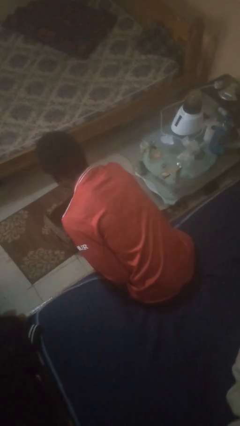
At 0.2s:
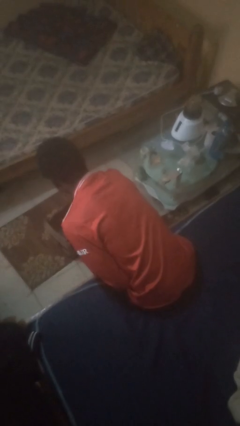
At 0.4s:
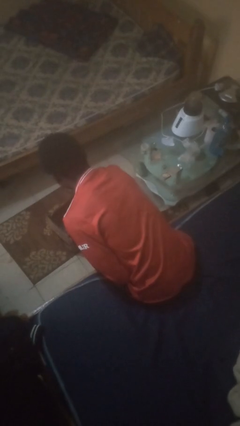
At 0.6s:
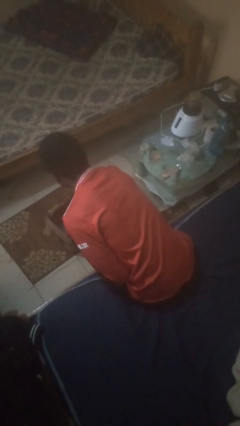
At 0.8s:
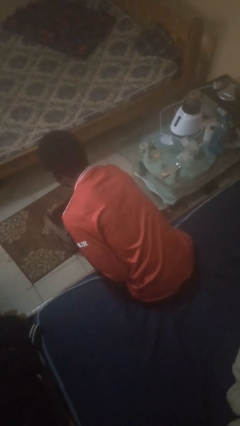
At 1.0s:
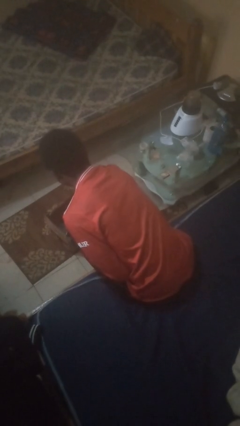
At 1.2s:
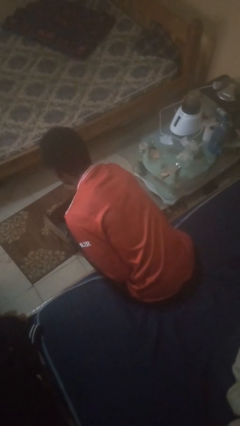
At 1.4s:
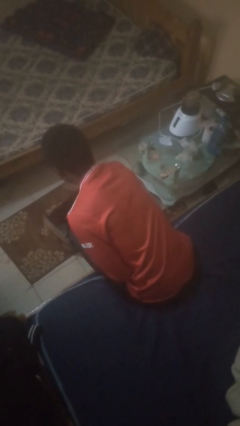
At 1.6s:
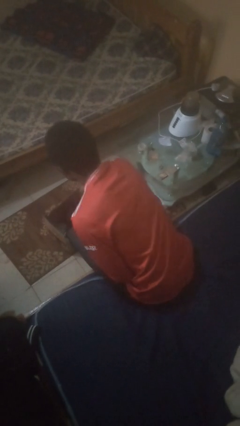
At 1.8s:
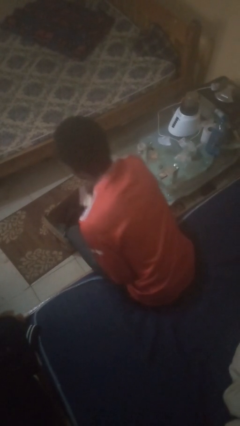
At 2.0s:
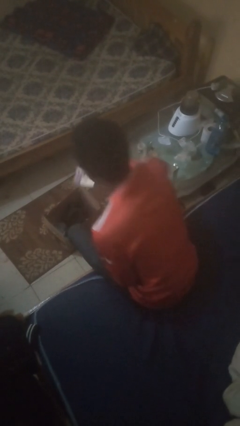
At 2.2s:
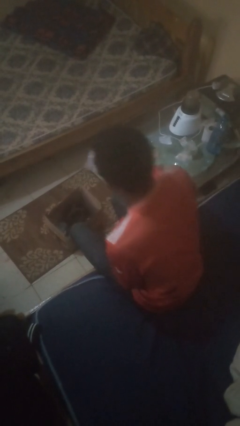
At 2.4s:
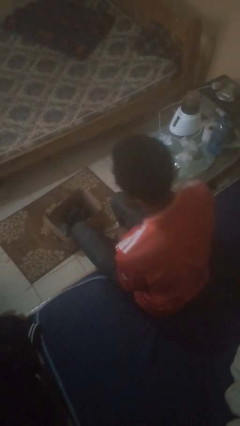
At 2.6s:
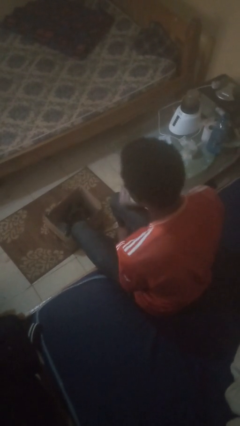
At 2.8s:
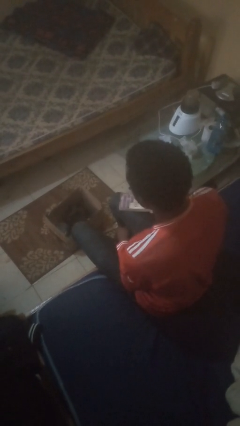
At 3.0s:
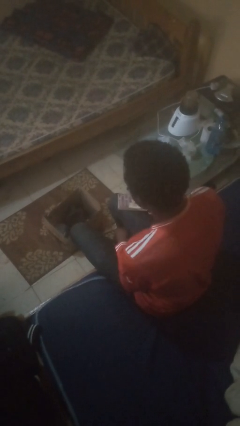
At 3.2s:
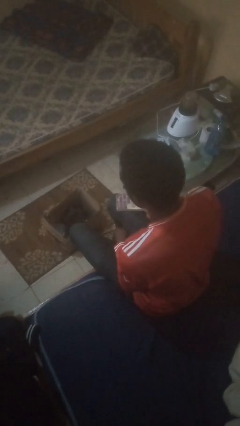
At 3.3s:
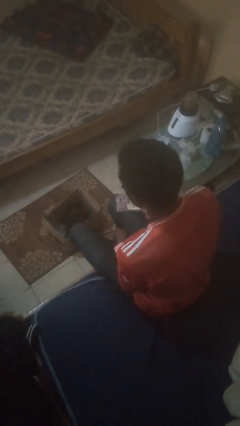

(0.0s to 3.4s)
person takes object from box

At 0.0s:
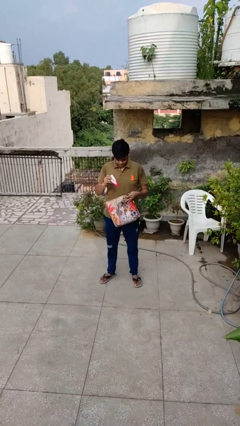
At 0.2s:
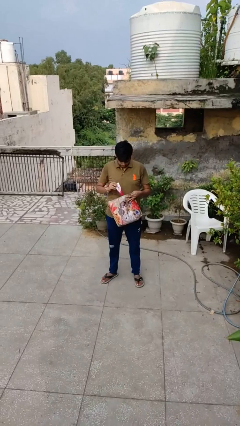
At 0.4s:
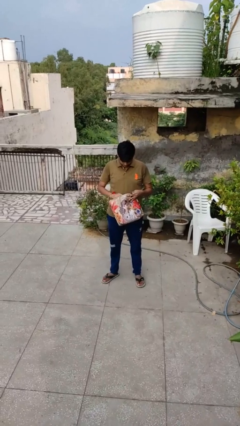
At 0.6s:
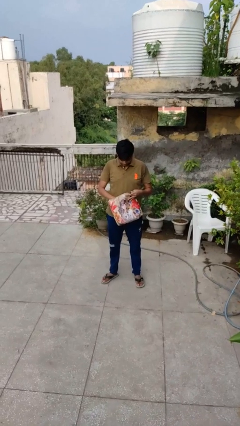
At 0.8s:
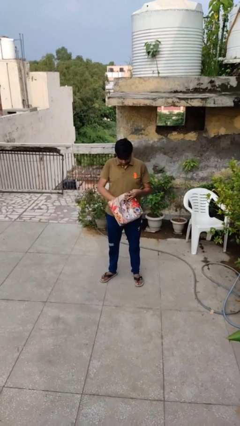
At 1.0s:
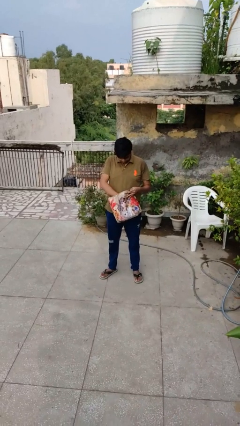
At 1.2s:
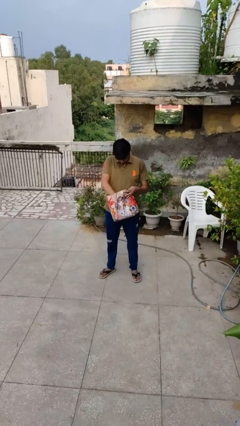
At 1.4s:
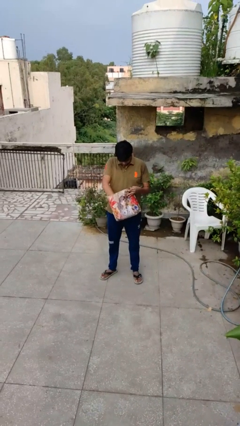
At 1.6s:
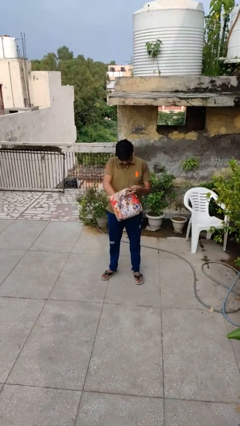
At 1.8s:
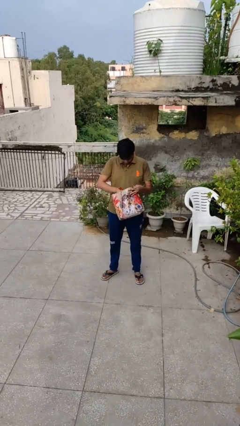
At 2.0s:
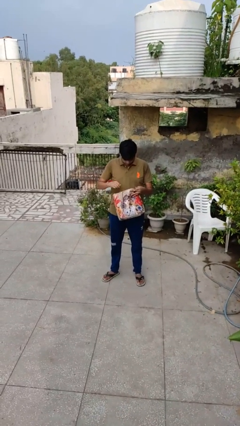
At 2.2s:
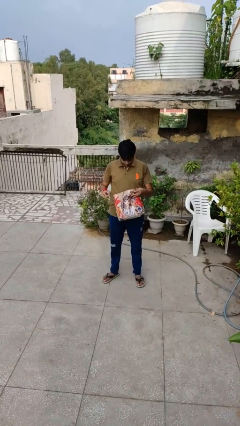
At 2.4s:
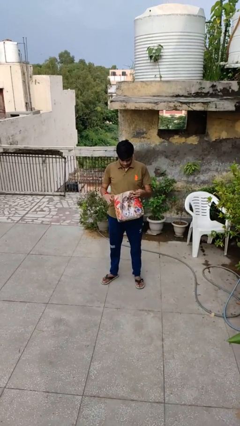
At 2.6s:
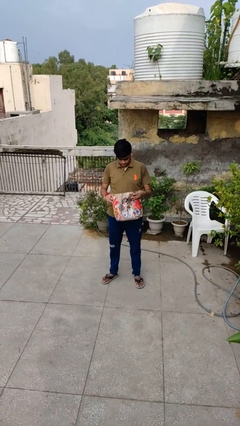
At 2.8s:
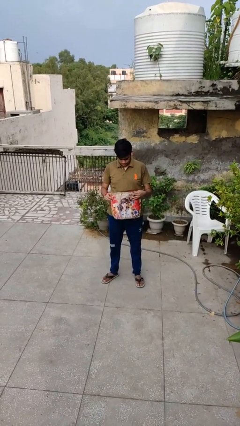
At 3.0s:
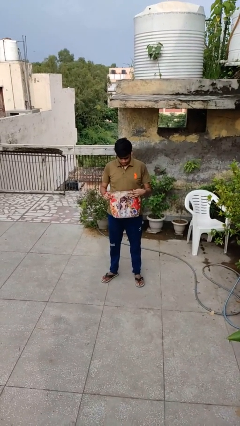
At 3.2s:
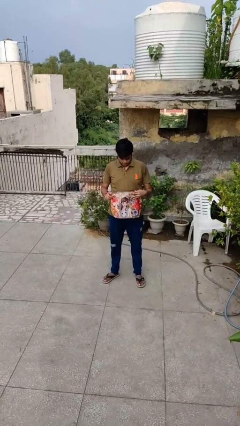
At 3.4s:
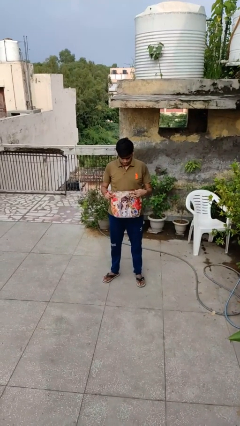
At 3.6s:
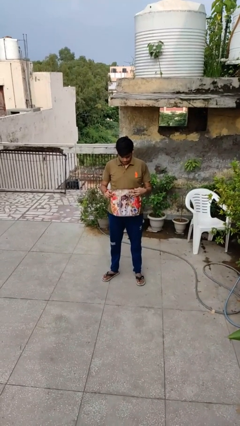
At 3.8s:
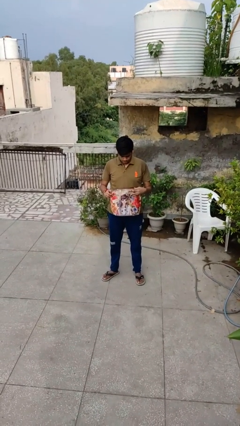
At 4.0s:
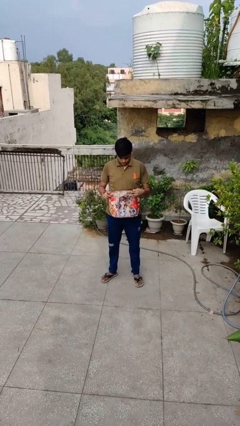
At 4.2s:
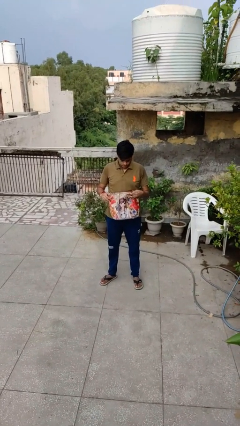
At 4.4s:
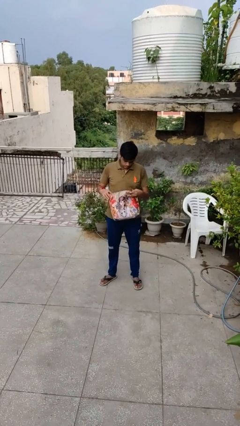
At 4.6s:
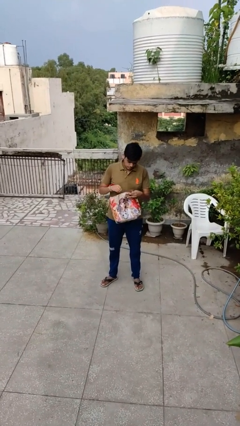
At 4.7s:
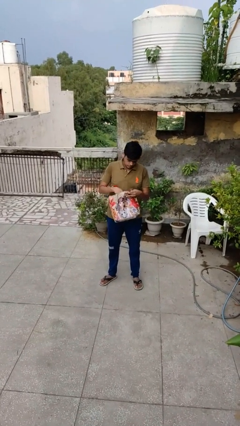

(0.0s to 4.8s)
person puts object into purse

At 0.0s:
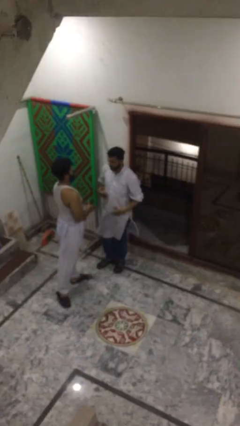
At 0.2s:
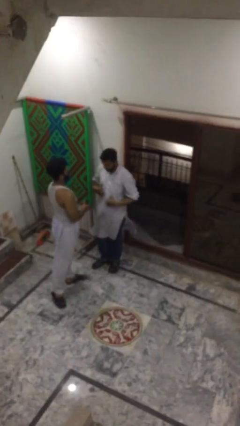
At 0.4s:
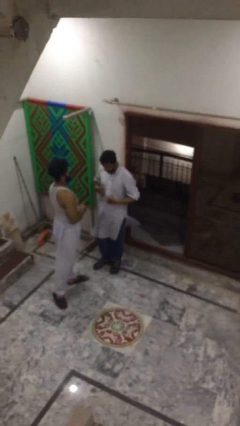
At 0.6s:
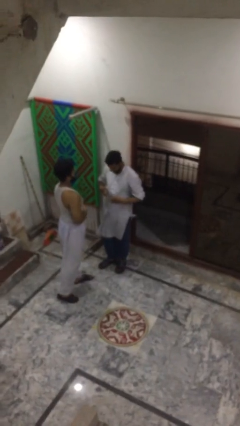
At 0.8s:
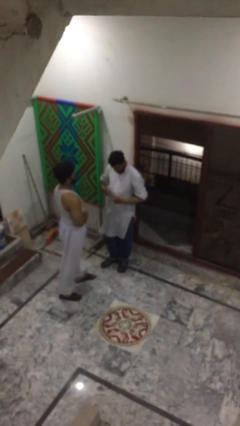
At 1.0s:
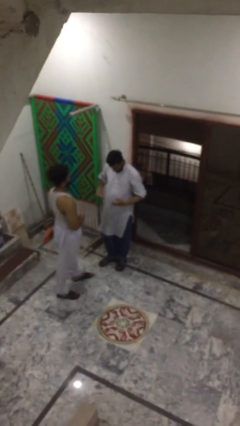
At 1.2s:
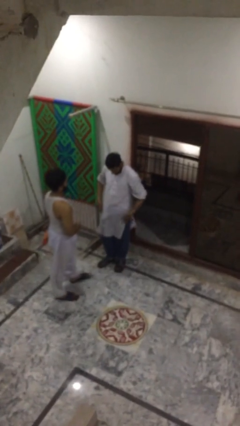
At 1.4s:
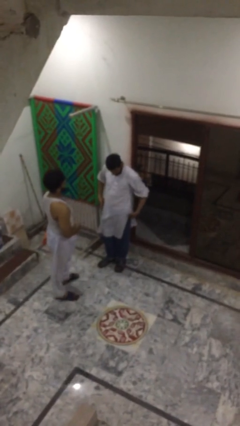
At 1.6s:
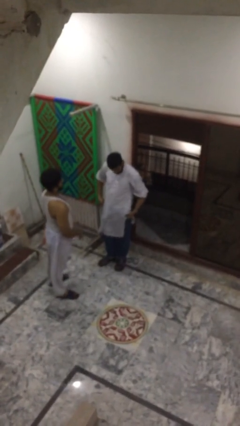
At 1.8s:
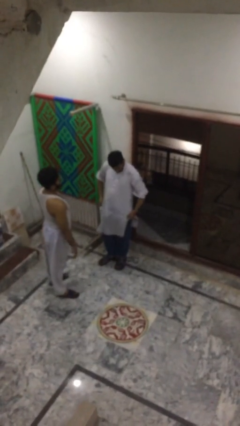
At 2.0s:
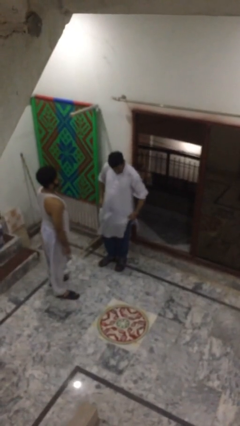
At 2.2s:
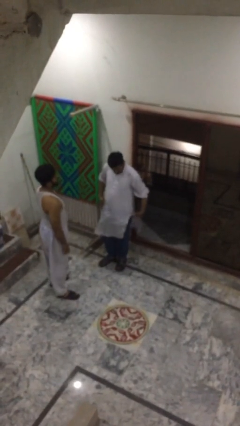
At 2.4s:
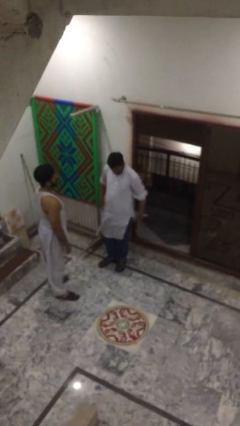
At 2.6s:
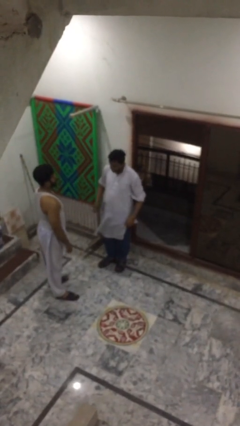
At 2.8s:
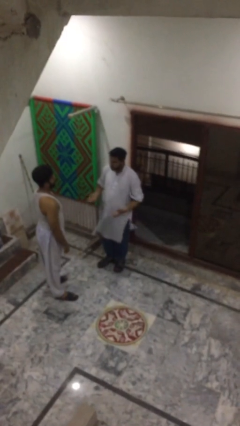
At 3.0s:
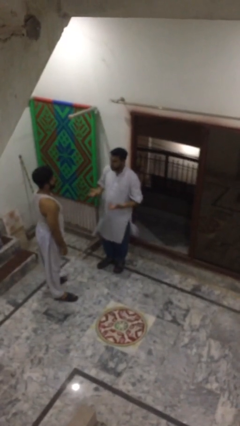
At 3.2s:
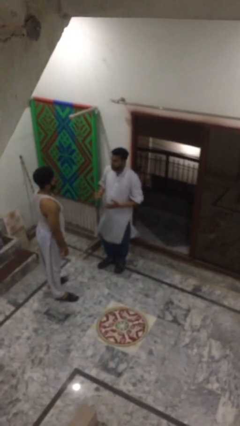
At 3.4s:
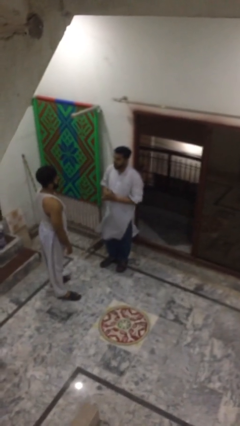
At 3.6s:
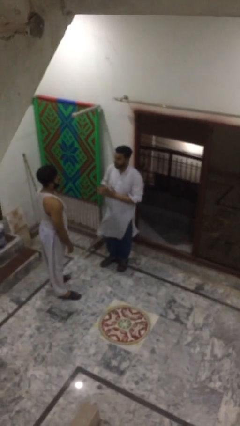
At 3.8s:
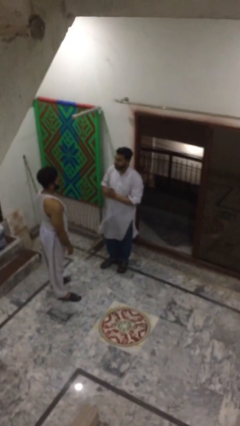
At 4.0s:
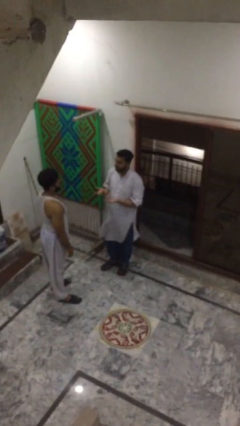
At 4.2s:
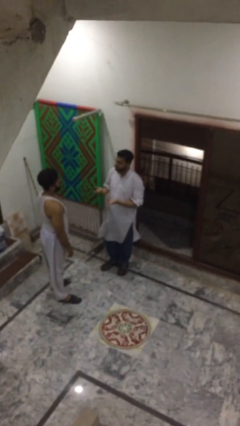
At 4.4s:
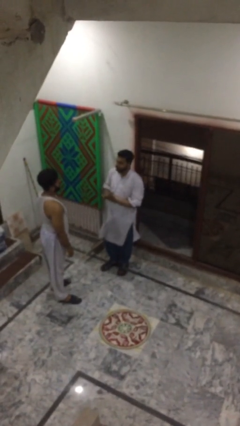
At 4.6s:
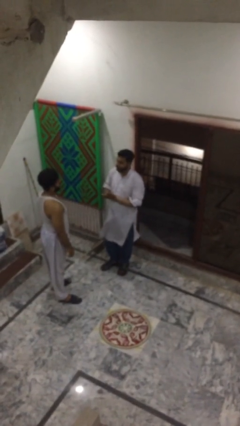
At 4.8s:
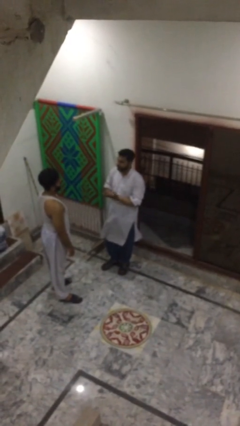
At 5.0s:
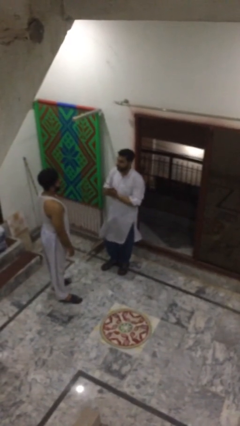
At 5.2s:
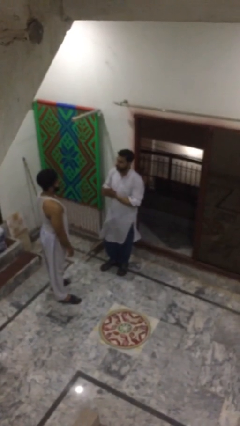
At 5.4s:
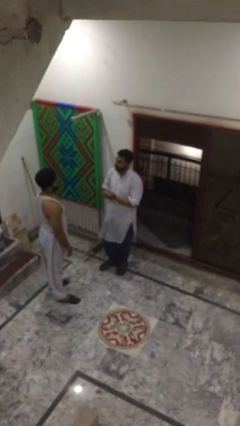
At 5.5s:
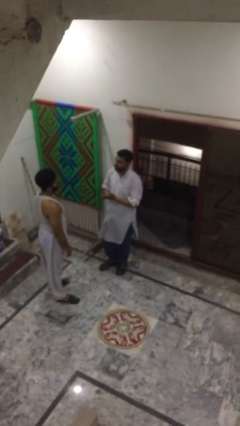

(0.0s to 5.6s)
person talks to person

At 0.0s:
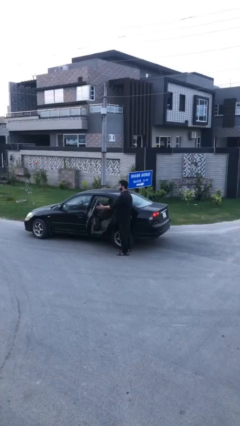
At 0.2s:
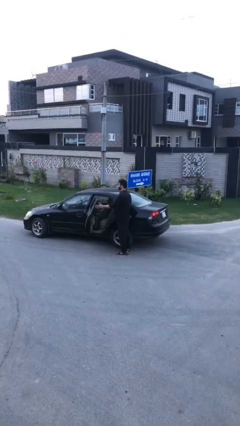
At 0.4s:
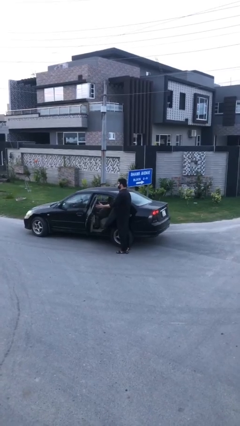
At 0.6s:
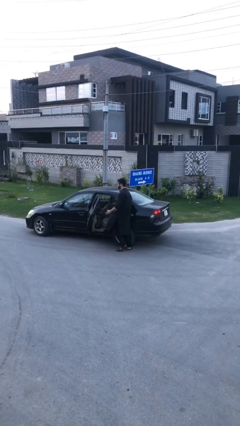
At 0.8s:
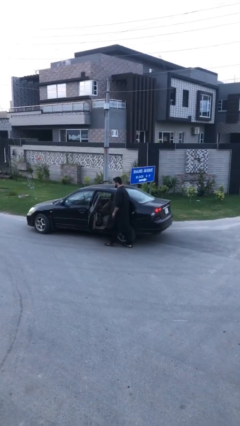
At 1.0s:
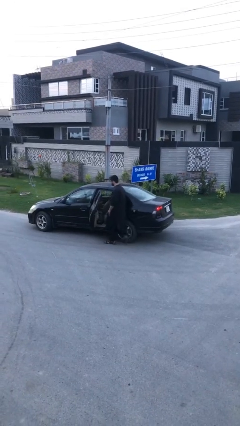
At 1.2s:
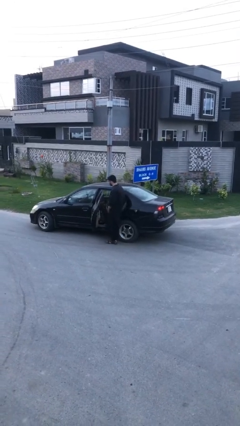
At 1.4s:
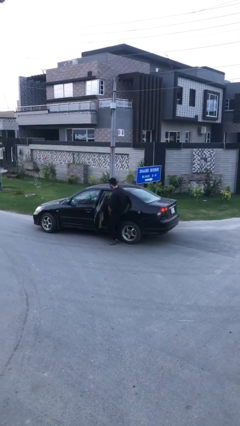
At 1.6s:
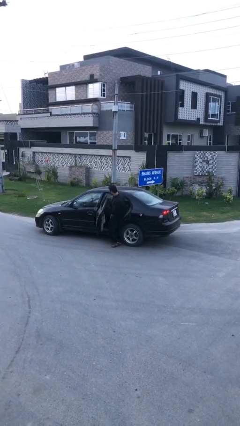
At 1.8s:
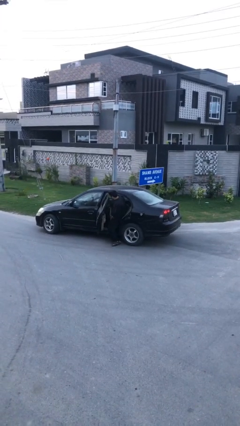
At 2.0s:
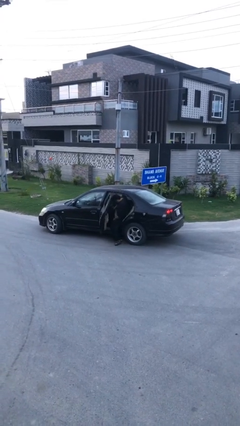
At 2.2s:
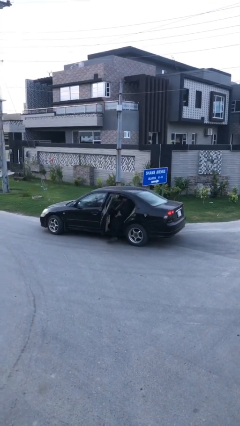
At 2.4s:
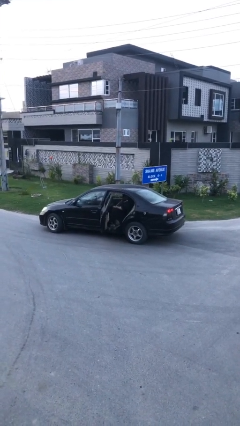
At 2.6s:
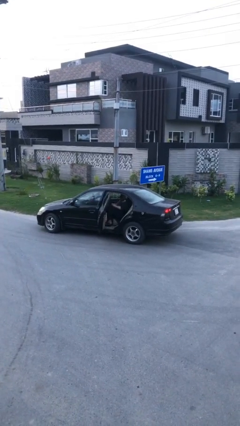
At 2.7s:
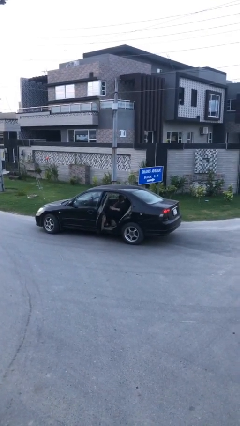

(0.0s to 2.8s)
person enters car

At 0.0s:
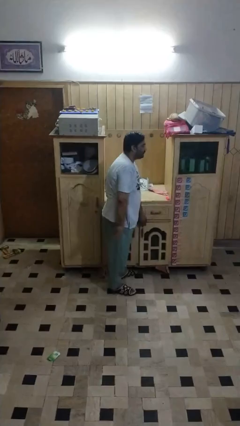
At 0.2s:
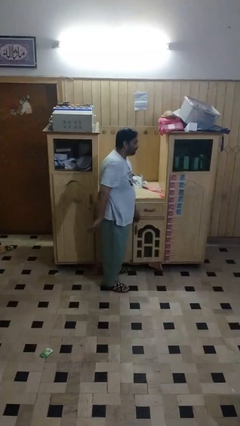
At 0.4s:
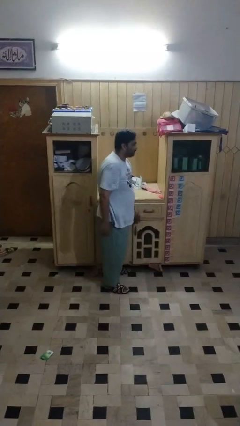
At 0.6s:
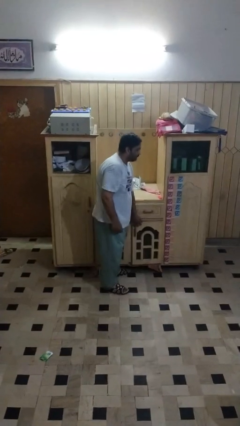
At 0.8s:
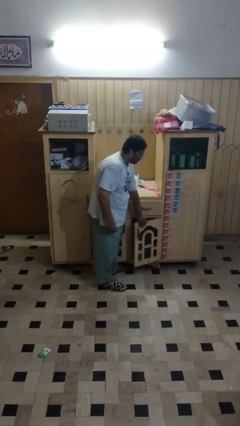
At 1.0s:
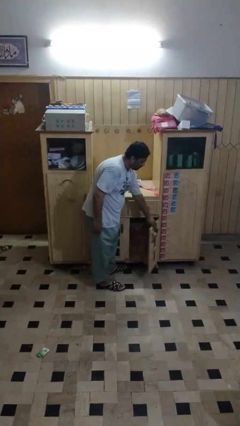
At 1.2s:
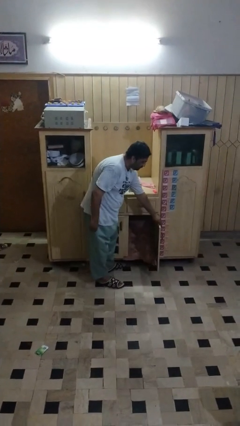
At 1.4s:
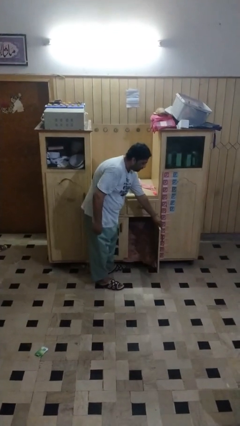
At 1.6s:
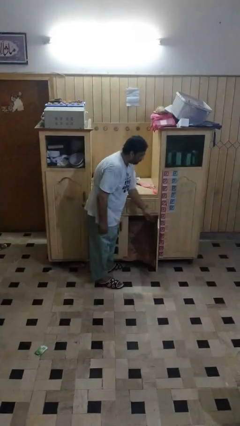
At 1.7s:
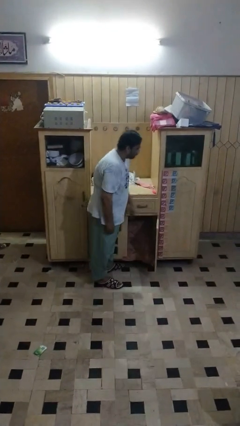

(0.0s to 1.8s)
person closes cabinet
